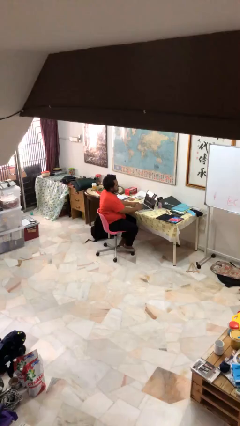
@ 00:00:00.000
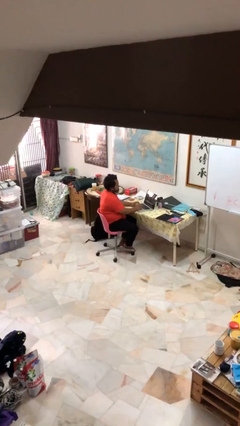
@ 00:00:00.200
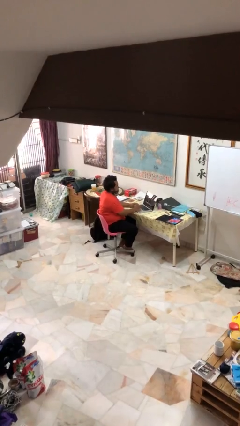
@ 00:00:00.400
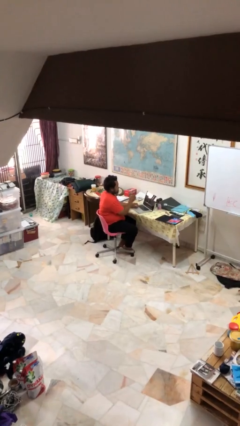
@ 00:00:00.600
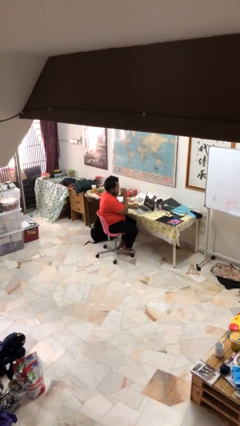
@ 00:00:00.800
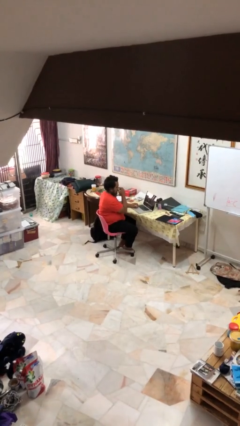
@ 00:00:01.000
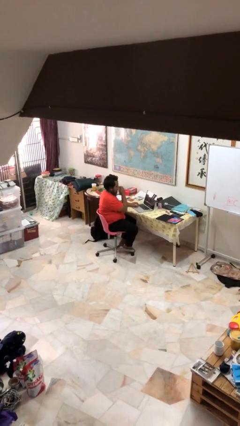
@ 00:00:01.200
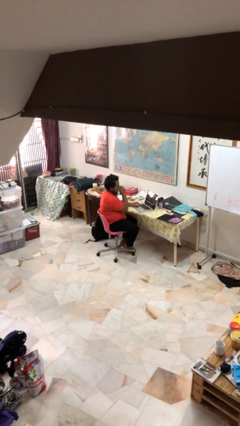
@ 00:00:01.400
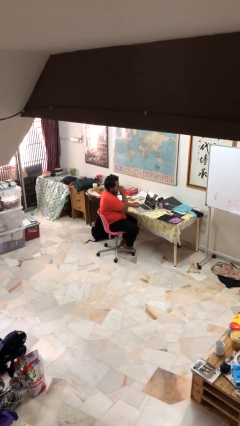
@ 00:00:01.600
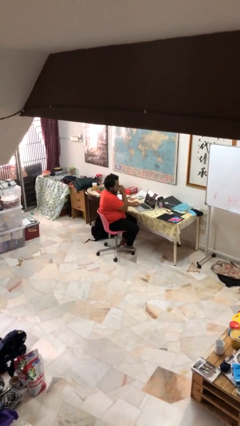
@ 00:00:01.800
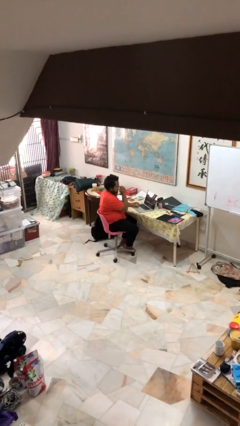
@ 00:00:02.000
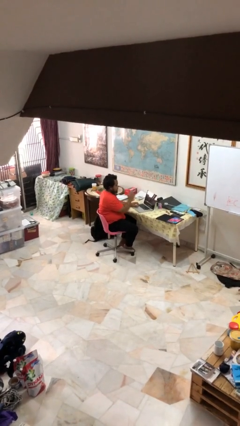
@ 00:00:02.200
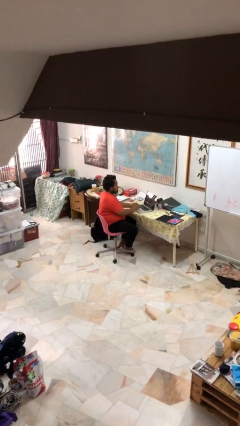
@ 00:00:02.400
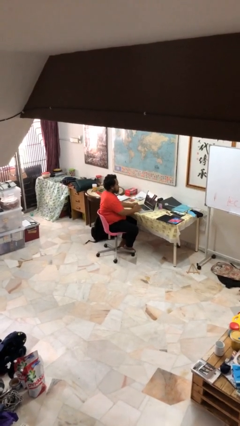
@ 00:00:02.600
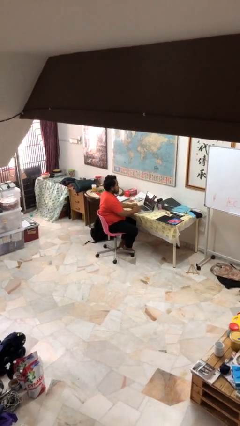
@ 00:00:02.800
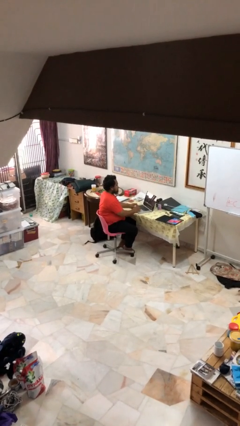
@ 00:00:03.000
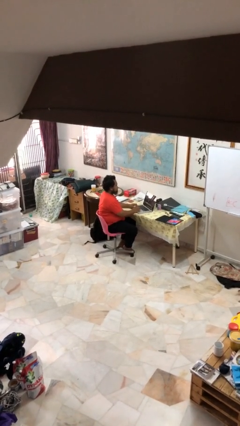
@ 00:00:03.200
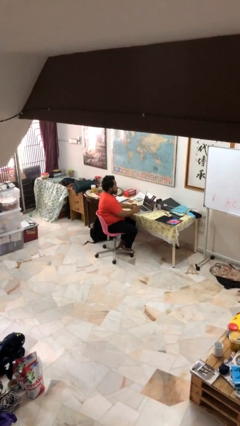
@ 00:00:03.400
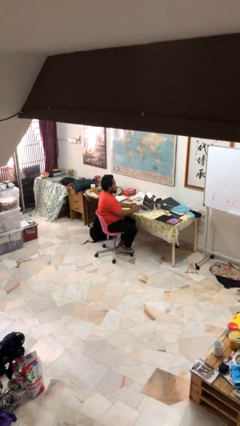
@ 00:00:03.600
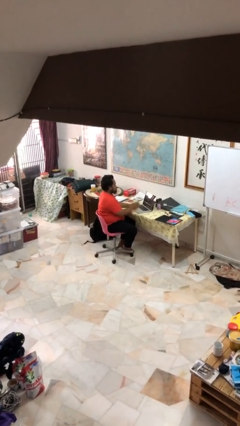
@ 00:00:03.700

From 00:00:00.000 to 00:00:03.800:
person interacts with laptop

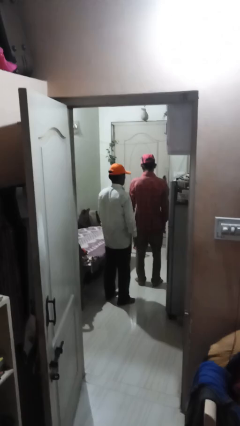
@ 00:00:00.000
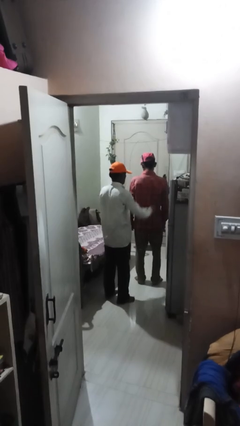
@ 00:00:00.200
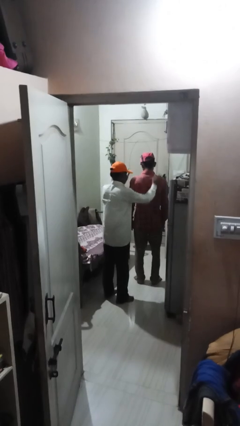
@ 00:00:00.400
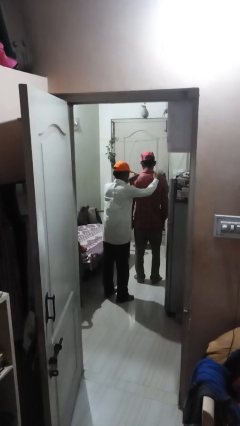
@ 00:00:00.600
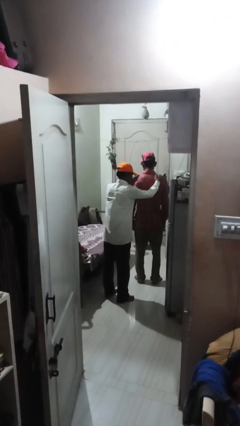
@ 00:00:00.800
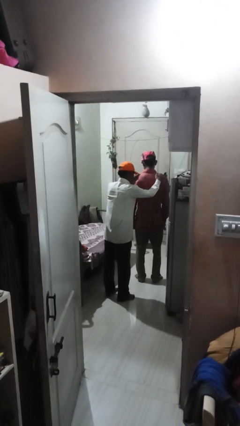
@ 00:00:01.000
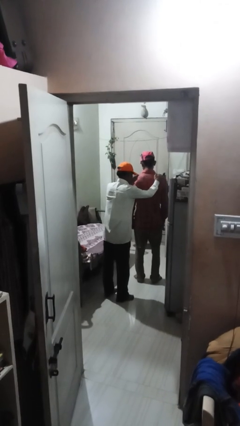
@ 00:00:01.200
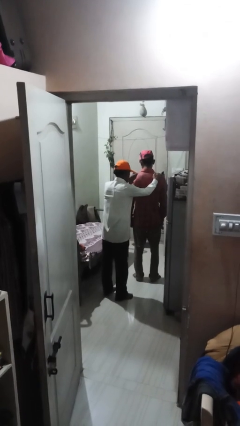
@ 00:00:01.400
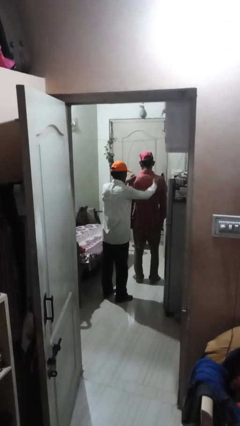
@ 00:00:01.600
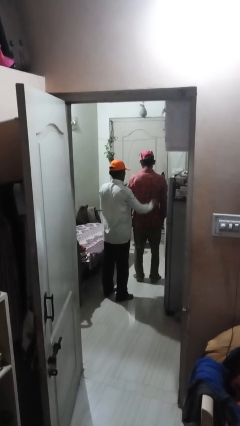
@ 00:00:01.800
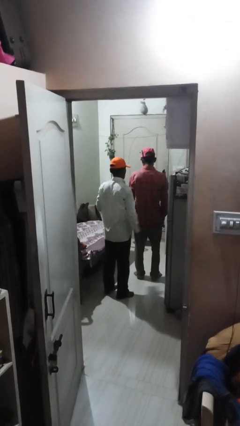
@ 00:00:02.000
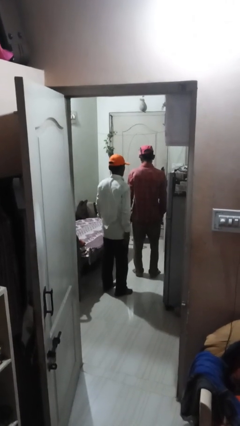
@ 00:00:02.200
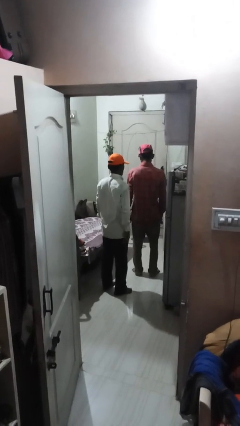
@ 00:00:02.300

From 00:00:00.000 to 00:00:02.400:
person touches back of person

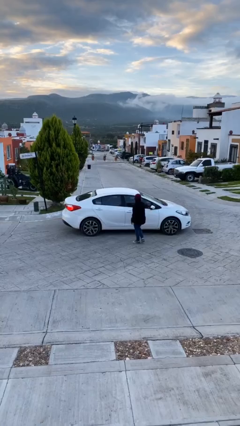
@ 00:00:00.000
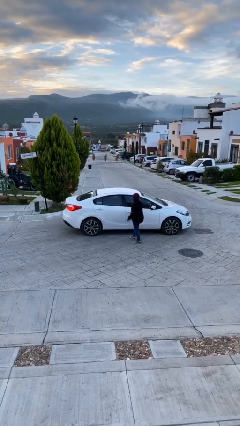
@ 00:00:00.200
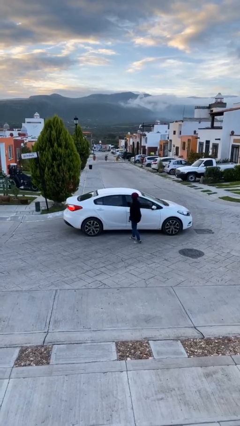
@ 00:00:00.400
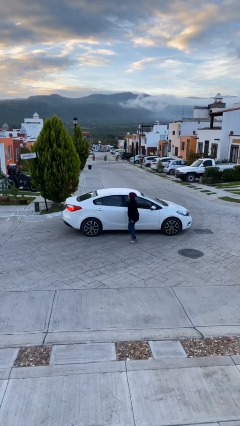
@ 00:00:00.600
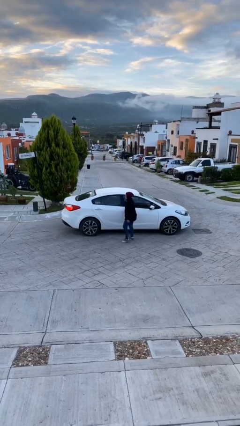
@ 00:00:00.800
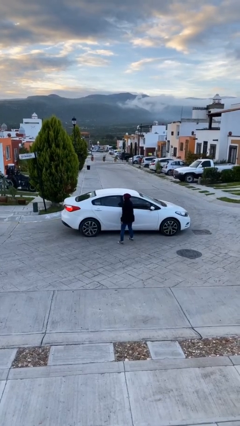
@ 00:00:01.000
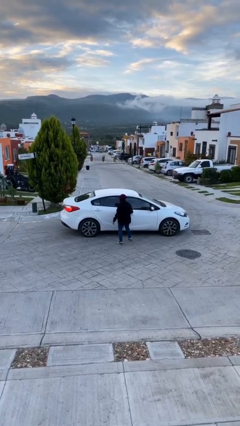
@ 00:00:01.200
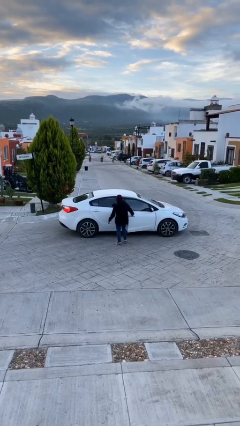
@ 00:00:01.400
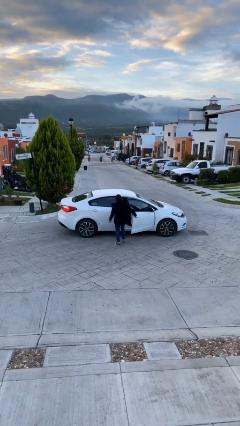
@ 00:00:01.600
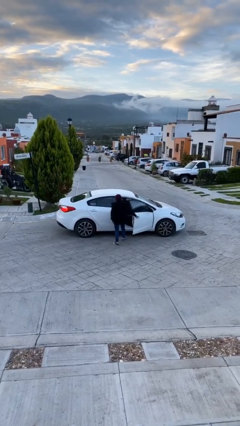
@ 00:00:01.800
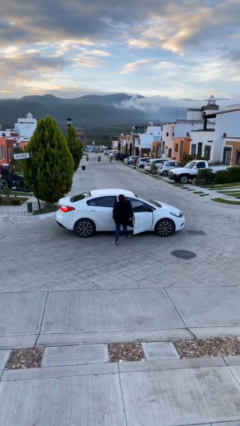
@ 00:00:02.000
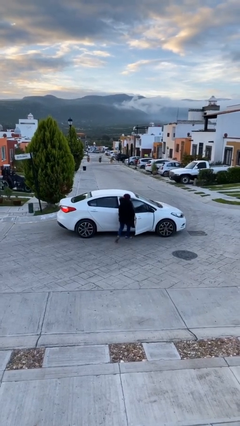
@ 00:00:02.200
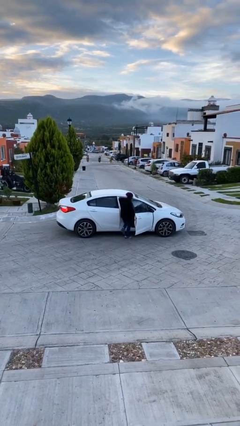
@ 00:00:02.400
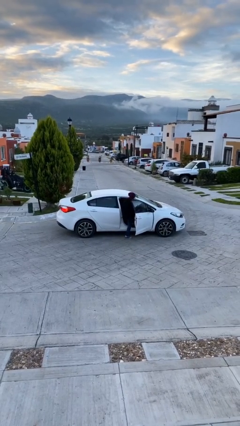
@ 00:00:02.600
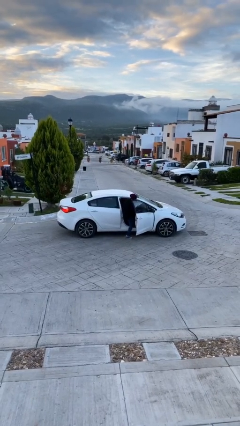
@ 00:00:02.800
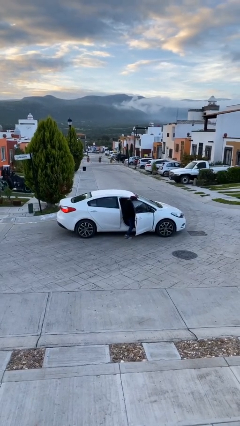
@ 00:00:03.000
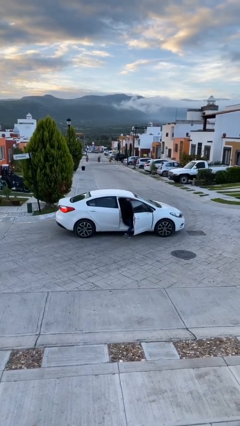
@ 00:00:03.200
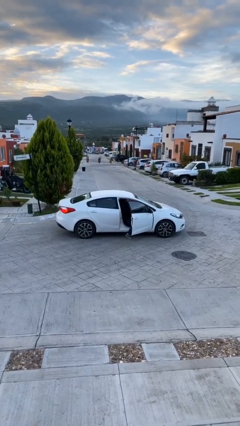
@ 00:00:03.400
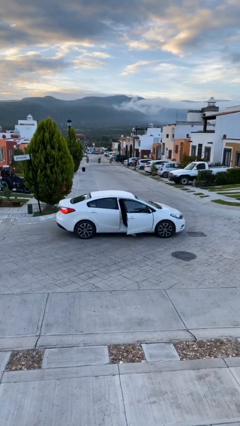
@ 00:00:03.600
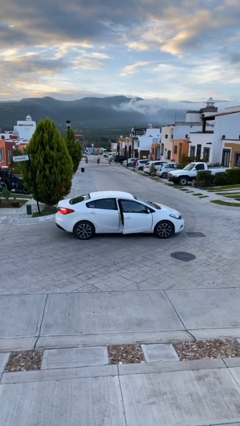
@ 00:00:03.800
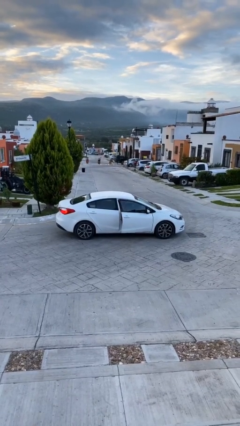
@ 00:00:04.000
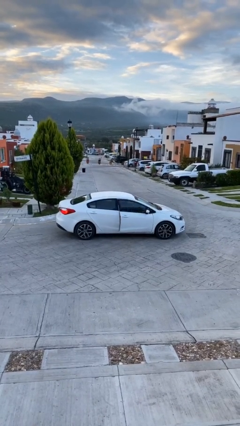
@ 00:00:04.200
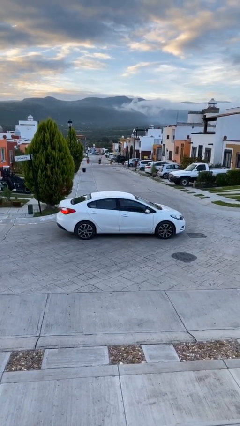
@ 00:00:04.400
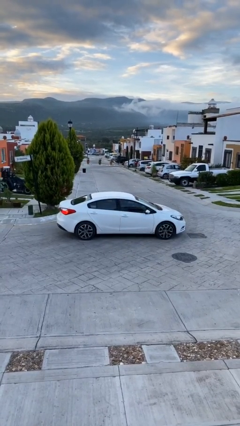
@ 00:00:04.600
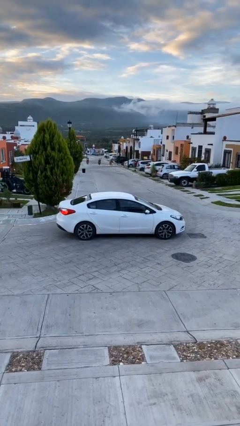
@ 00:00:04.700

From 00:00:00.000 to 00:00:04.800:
car picks up person

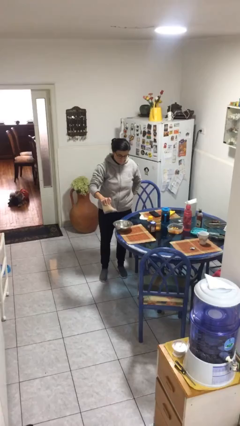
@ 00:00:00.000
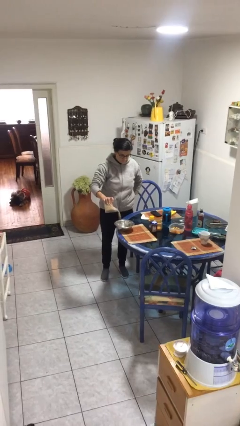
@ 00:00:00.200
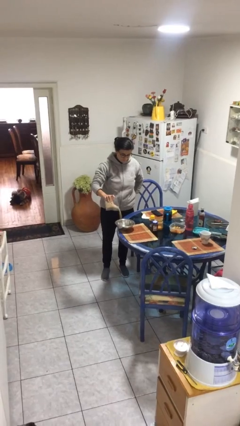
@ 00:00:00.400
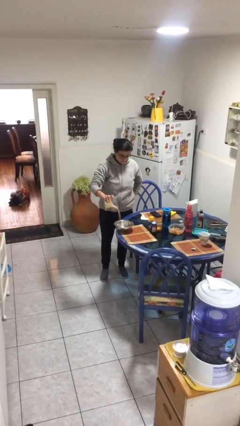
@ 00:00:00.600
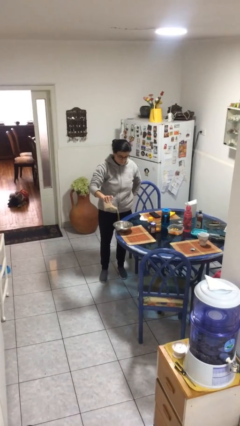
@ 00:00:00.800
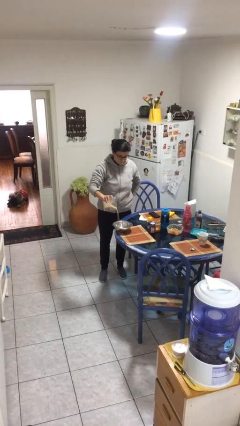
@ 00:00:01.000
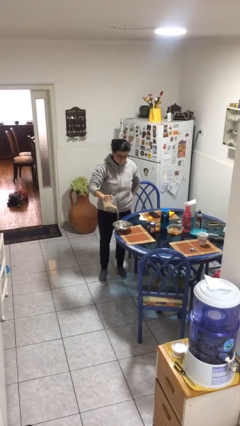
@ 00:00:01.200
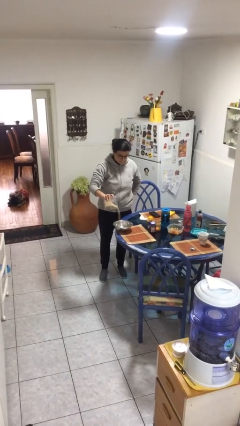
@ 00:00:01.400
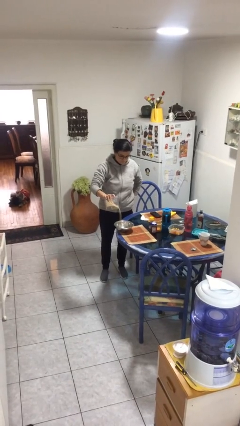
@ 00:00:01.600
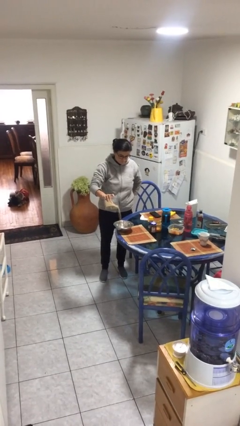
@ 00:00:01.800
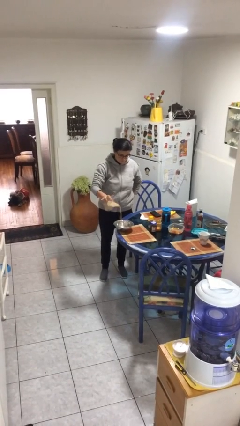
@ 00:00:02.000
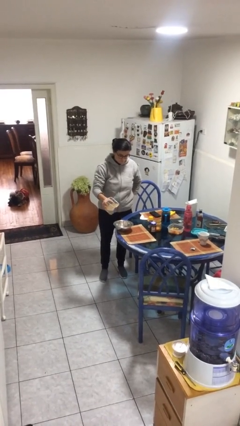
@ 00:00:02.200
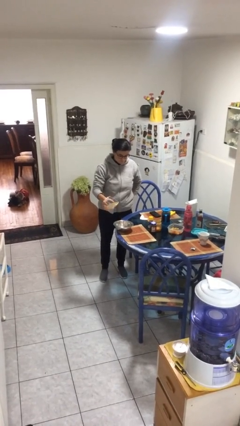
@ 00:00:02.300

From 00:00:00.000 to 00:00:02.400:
person pours into bowl

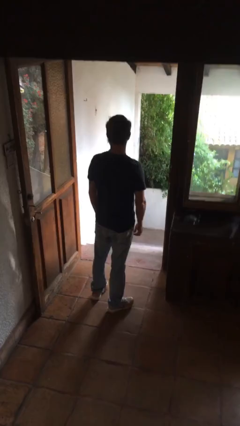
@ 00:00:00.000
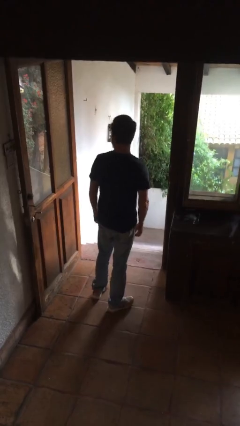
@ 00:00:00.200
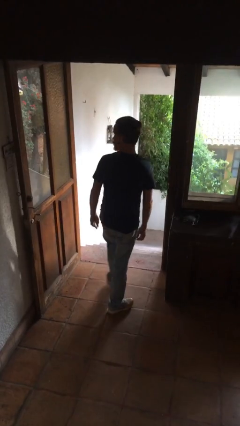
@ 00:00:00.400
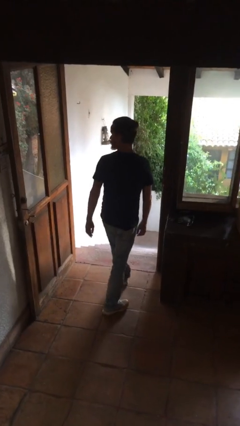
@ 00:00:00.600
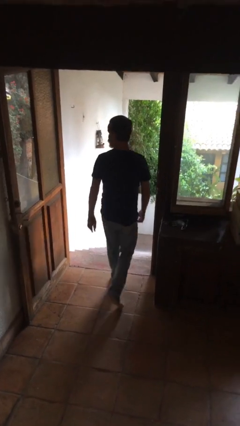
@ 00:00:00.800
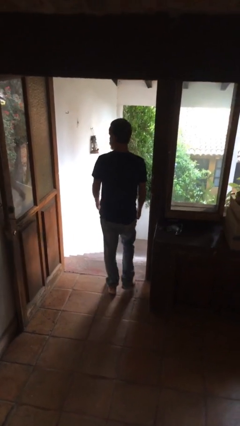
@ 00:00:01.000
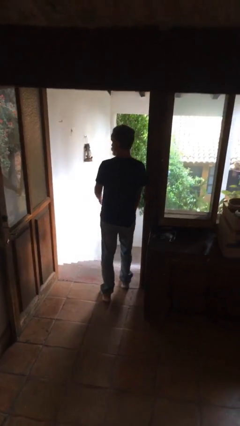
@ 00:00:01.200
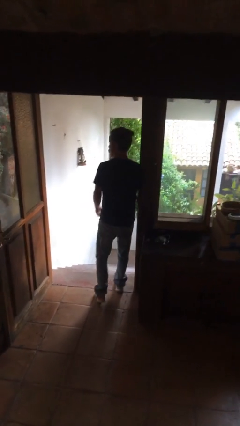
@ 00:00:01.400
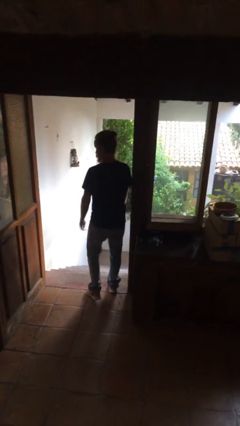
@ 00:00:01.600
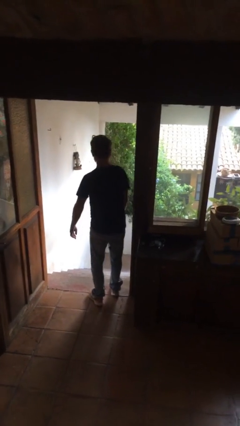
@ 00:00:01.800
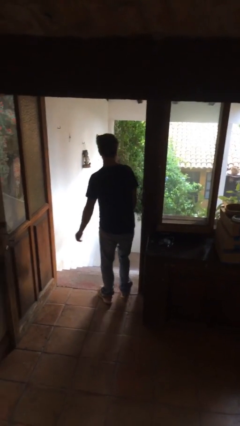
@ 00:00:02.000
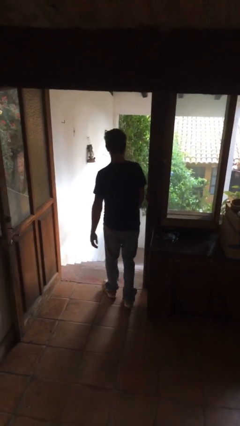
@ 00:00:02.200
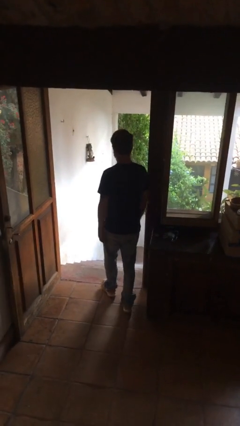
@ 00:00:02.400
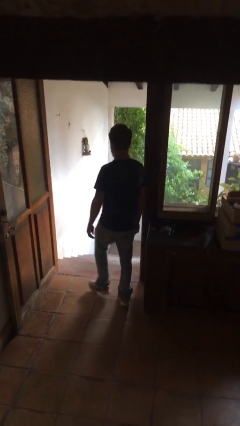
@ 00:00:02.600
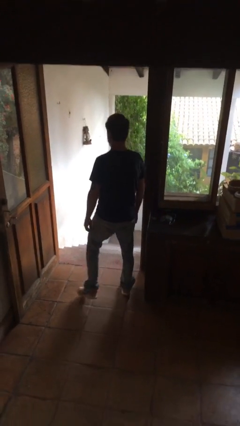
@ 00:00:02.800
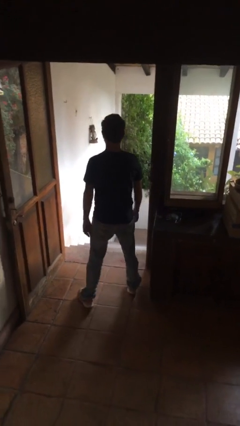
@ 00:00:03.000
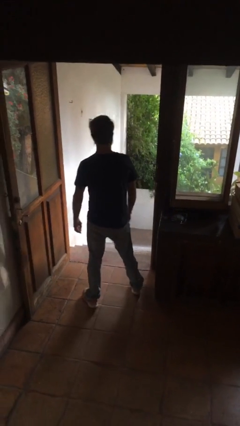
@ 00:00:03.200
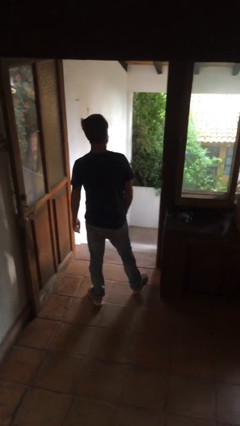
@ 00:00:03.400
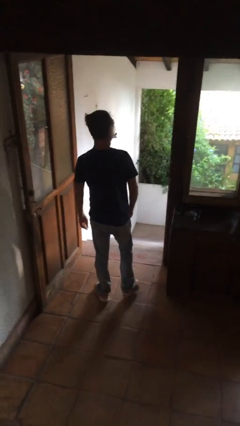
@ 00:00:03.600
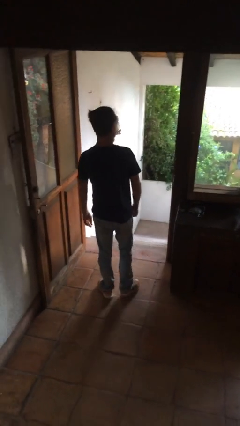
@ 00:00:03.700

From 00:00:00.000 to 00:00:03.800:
person bumps into wall
